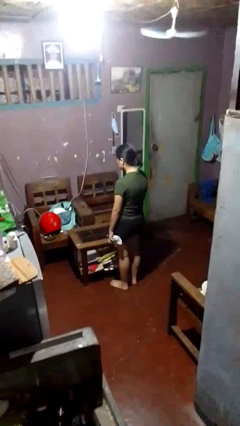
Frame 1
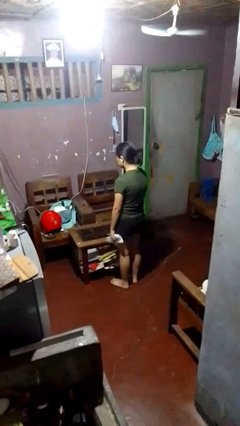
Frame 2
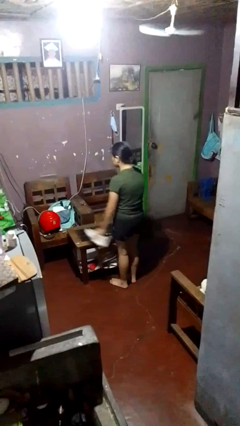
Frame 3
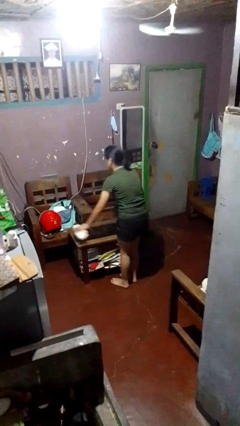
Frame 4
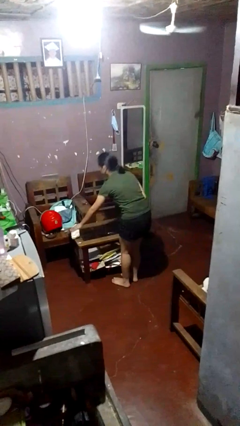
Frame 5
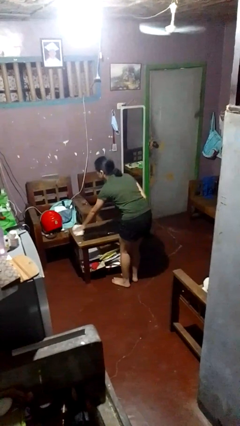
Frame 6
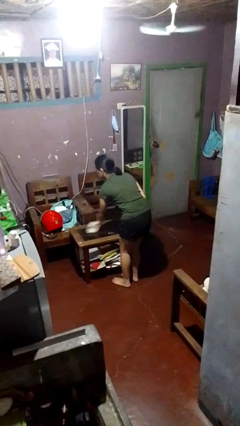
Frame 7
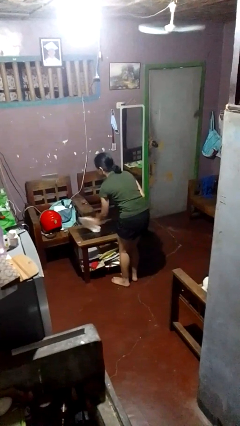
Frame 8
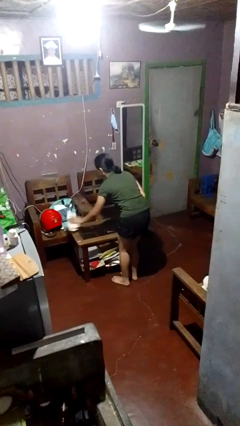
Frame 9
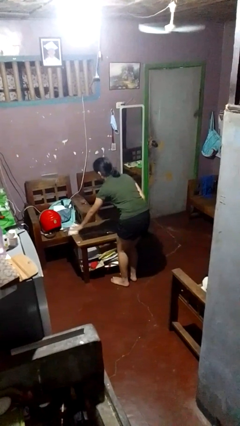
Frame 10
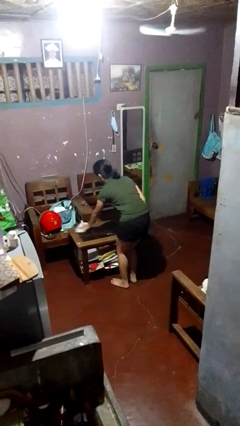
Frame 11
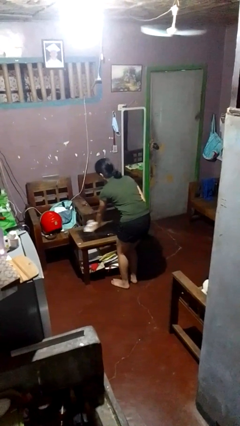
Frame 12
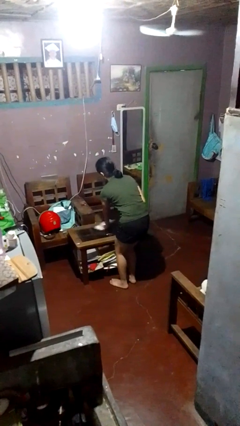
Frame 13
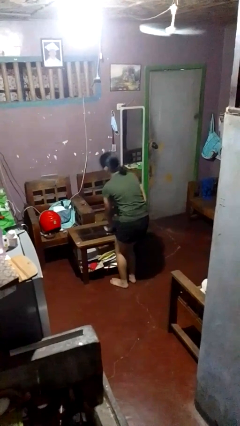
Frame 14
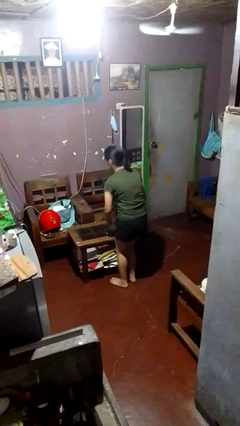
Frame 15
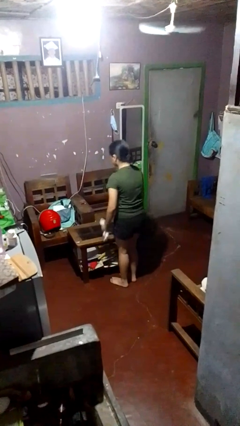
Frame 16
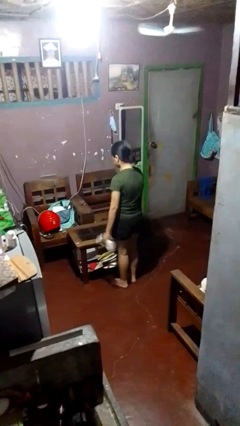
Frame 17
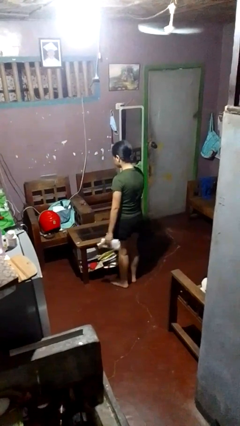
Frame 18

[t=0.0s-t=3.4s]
person cleans table with rag

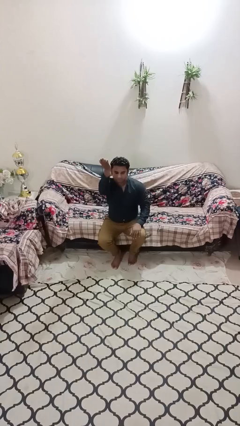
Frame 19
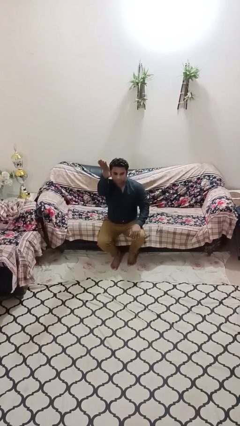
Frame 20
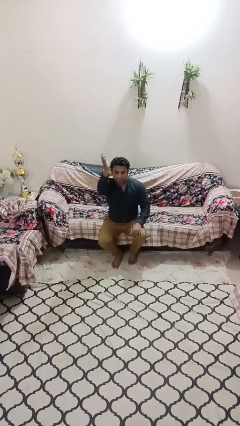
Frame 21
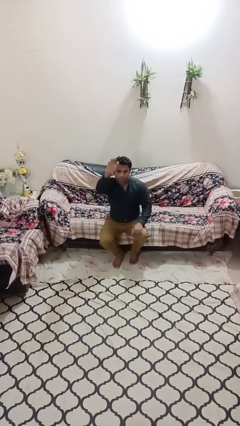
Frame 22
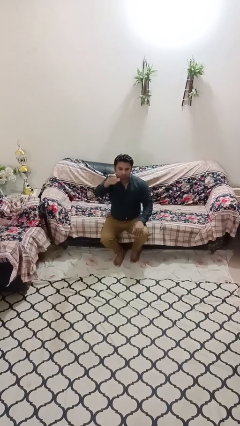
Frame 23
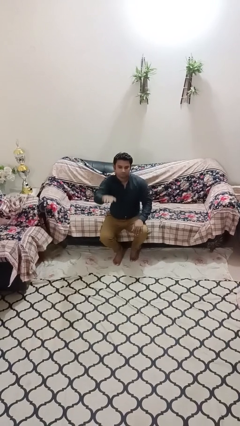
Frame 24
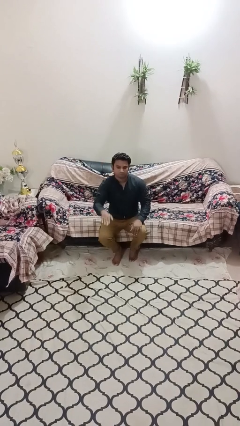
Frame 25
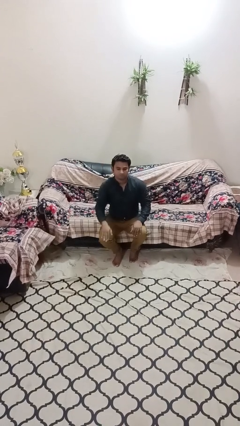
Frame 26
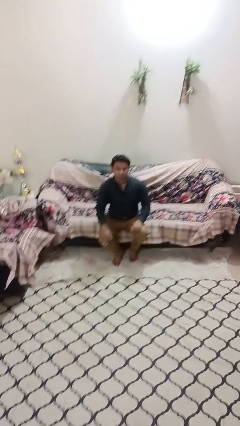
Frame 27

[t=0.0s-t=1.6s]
person gestures swipe down

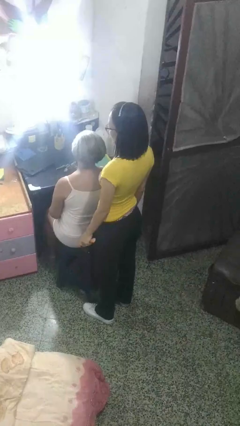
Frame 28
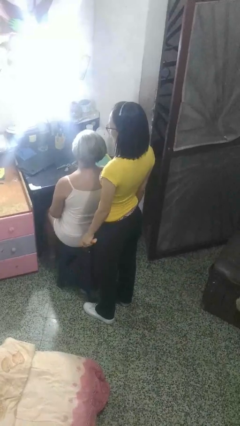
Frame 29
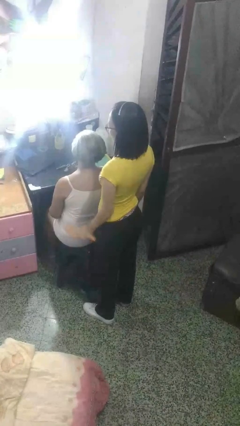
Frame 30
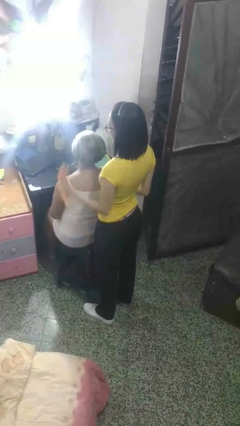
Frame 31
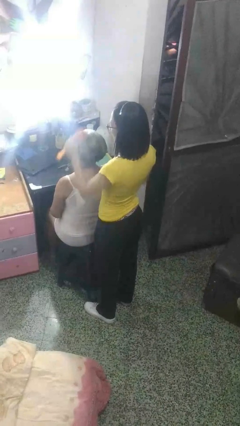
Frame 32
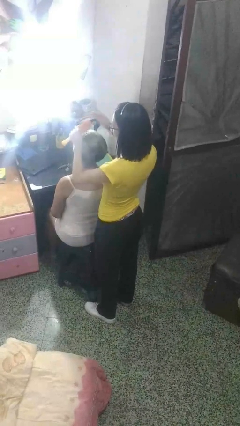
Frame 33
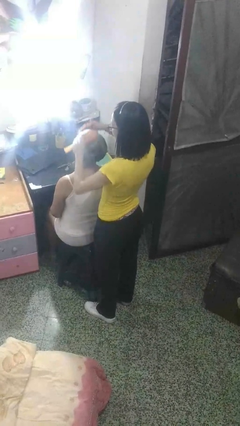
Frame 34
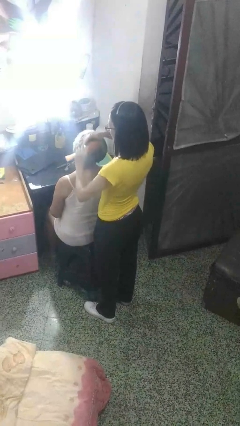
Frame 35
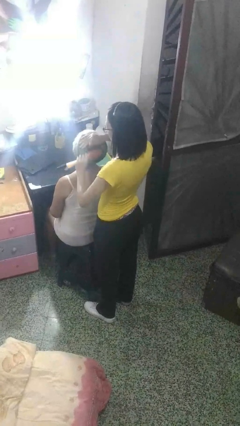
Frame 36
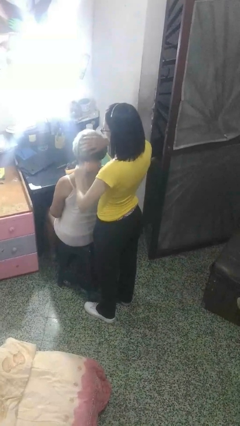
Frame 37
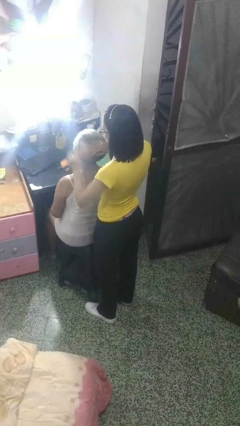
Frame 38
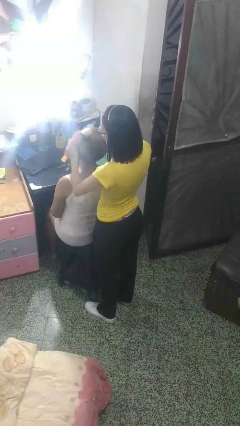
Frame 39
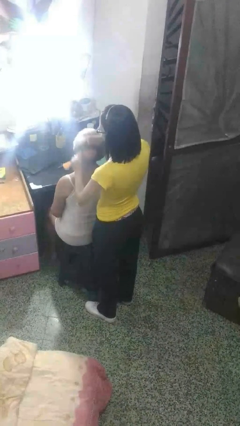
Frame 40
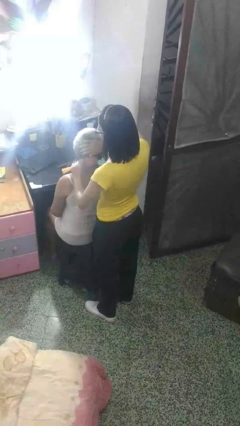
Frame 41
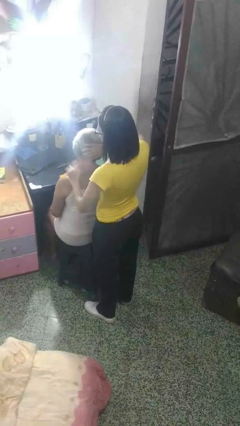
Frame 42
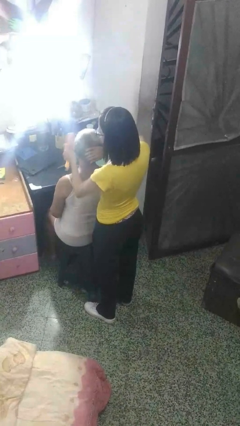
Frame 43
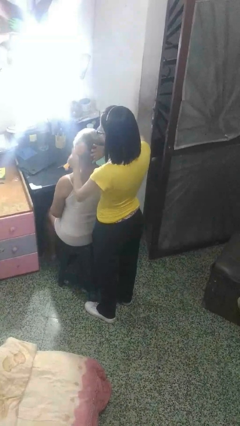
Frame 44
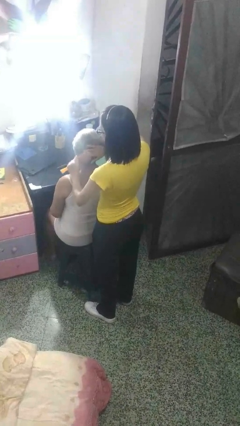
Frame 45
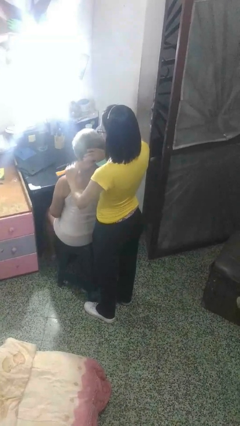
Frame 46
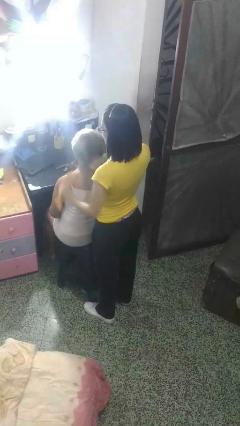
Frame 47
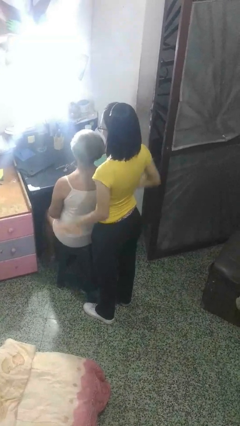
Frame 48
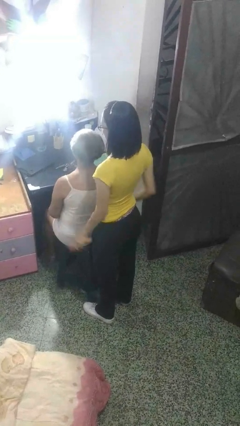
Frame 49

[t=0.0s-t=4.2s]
person brushes hair of person

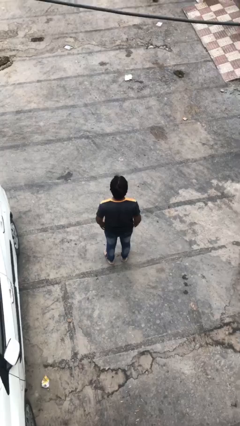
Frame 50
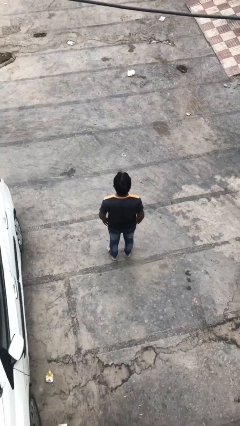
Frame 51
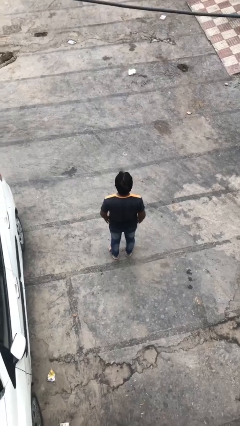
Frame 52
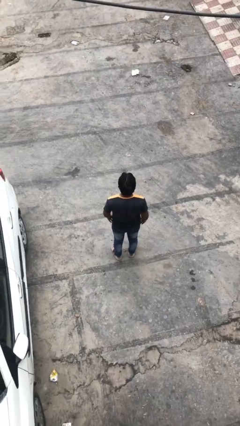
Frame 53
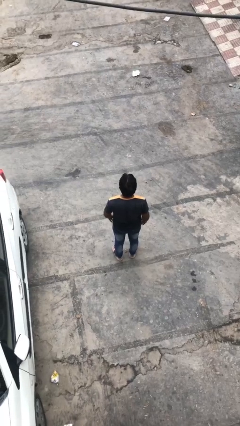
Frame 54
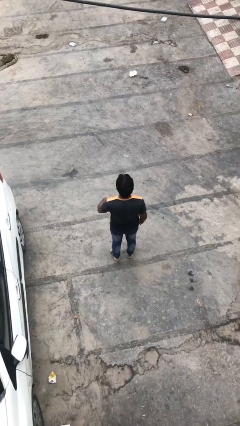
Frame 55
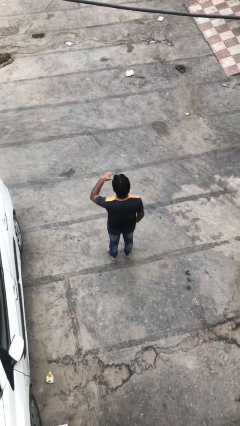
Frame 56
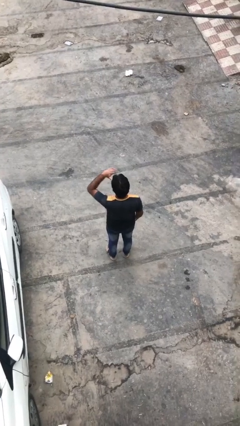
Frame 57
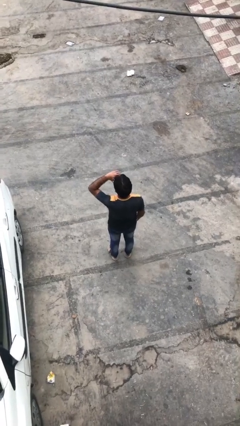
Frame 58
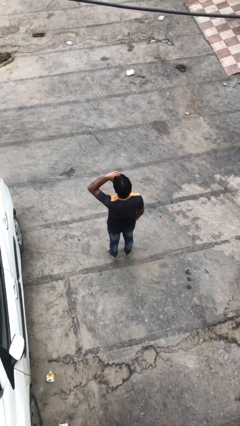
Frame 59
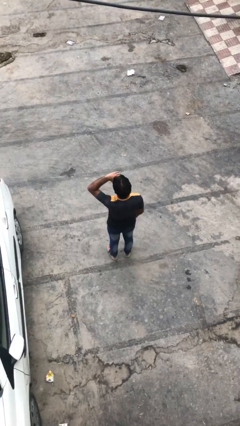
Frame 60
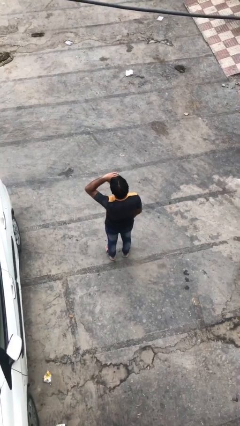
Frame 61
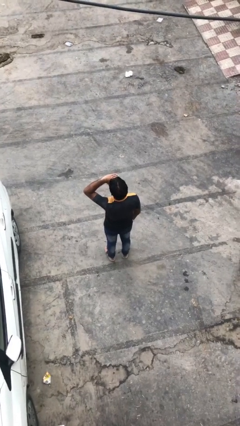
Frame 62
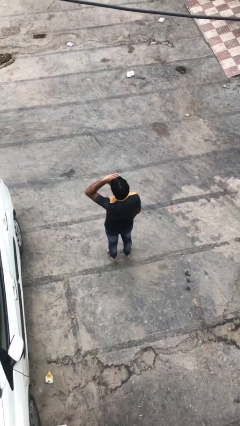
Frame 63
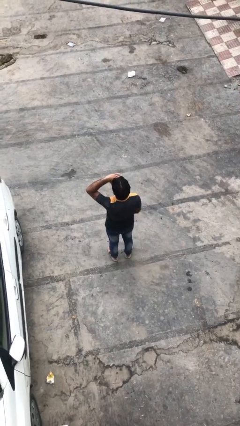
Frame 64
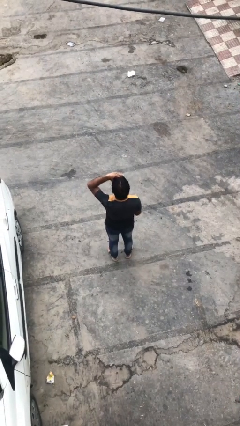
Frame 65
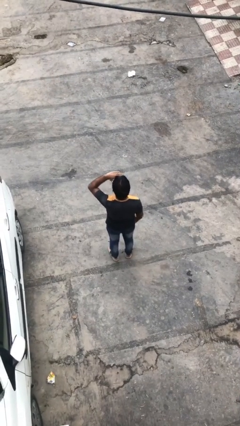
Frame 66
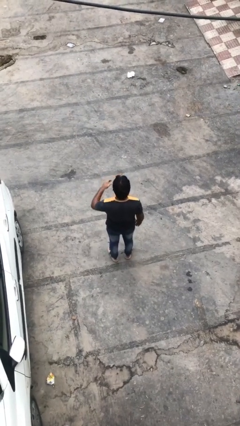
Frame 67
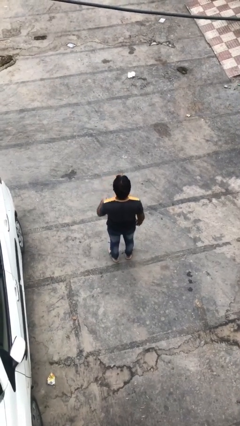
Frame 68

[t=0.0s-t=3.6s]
person shades eyes

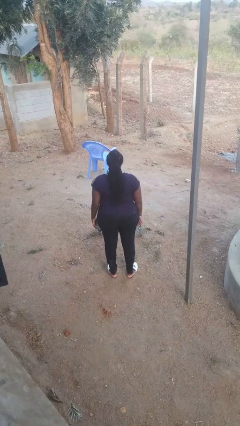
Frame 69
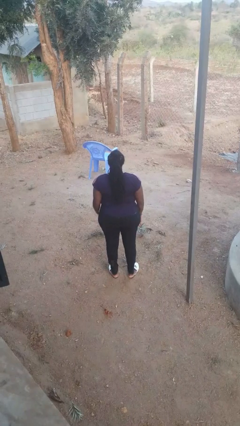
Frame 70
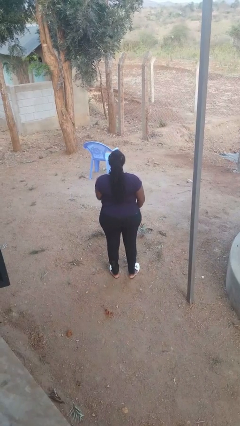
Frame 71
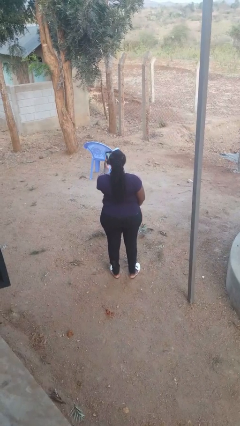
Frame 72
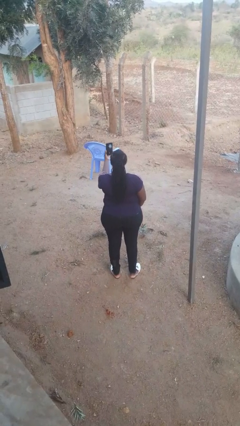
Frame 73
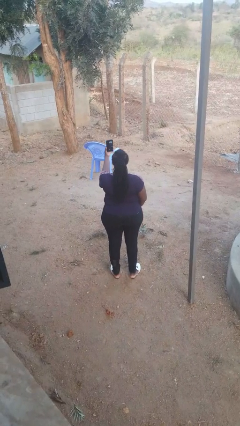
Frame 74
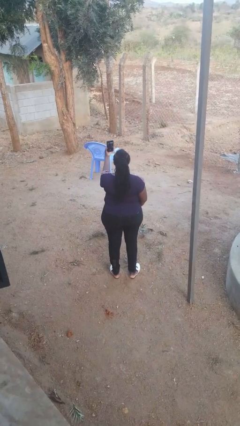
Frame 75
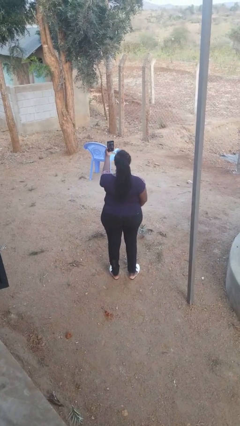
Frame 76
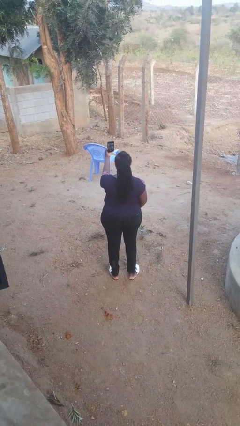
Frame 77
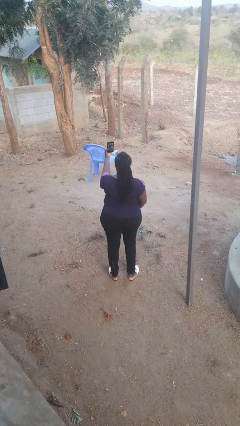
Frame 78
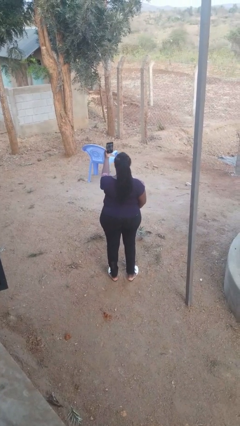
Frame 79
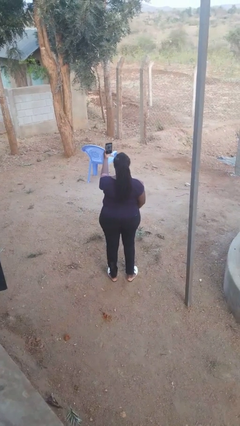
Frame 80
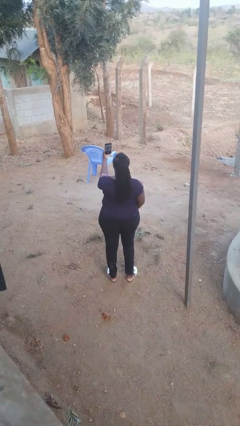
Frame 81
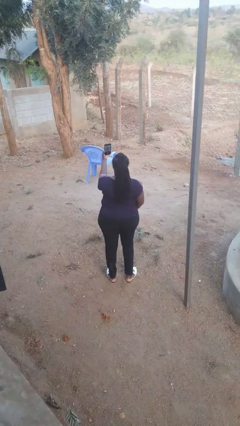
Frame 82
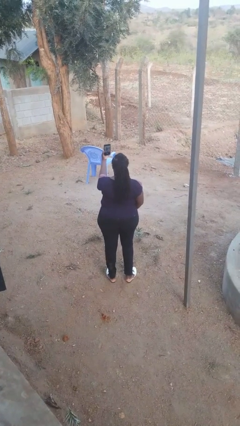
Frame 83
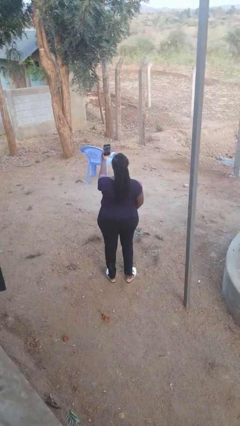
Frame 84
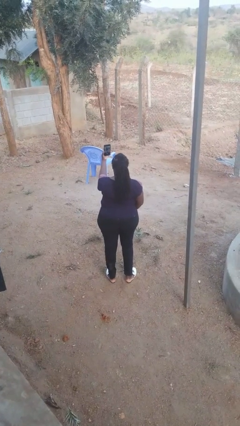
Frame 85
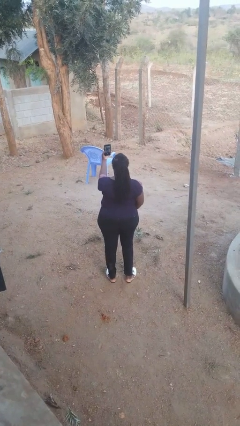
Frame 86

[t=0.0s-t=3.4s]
person takes selfie

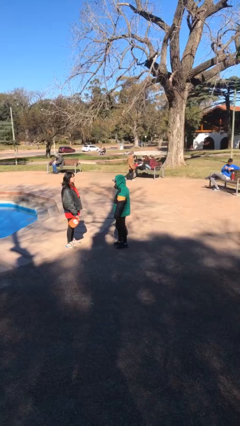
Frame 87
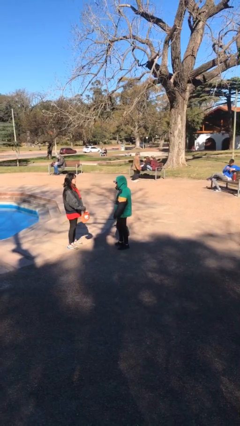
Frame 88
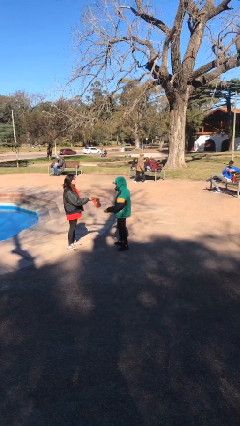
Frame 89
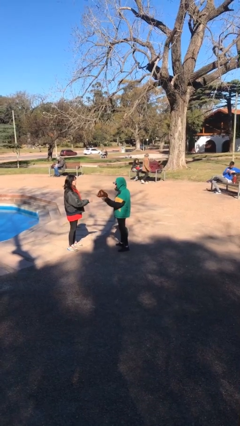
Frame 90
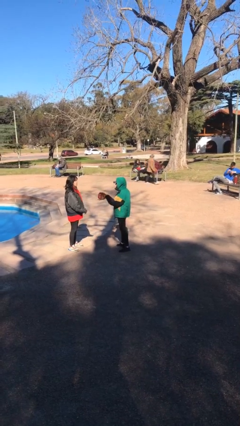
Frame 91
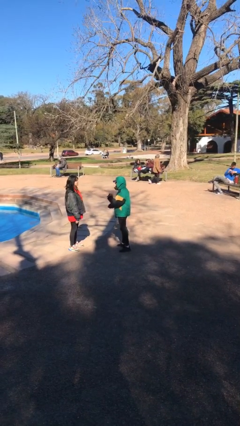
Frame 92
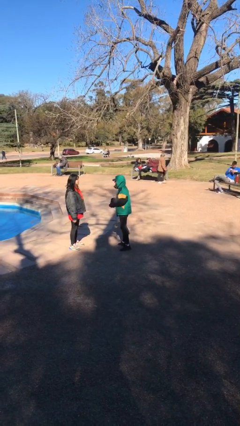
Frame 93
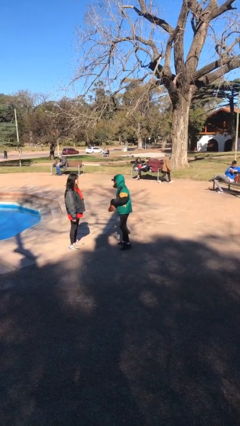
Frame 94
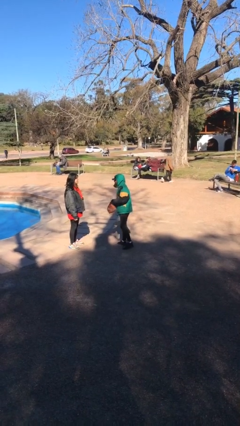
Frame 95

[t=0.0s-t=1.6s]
person transfers object to person
